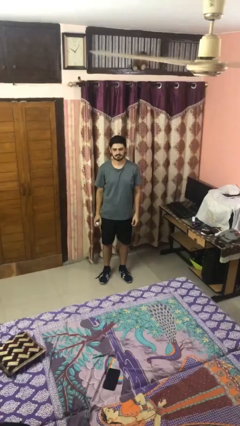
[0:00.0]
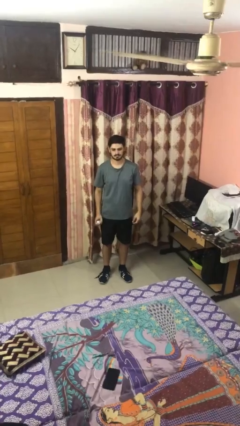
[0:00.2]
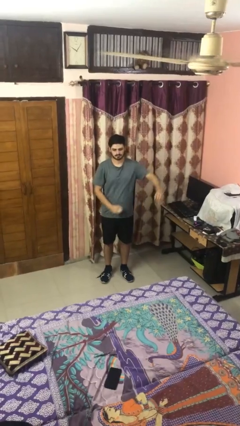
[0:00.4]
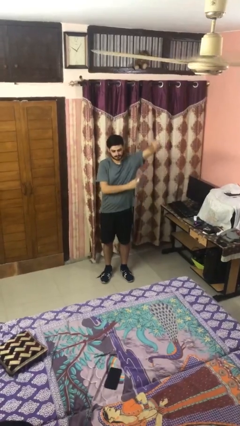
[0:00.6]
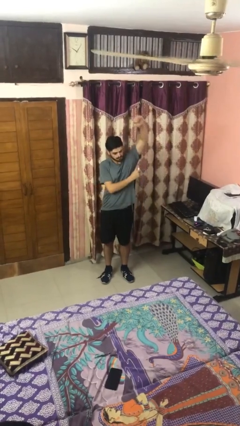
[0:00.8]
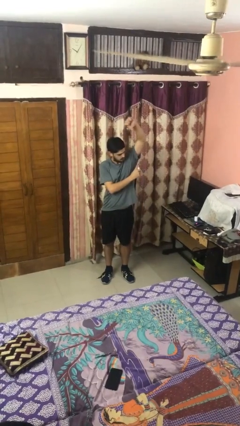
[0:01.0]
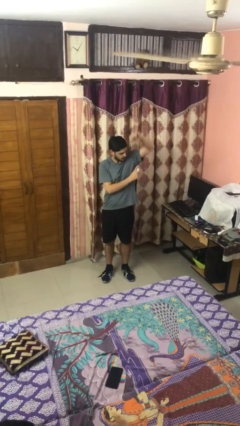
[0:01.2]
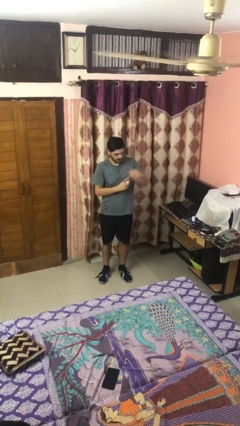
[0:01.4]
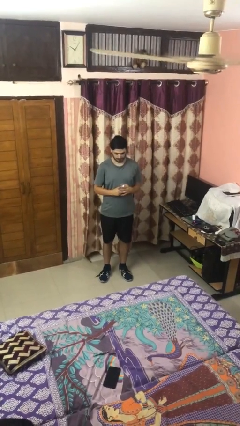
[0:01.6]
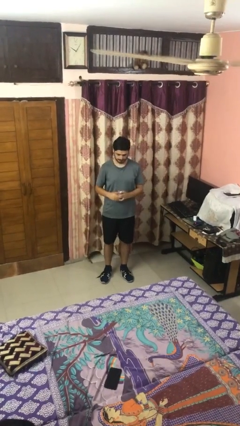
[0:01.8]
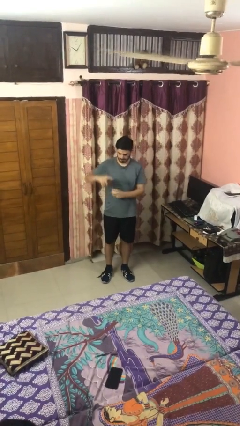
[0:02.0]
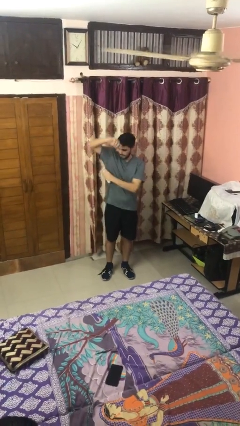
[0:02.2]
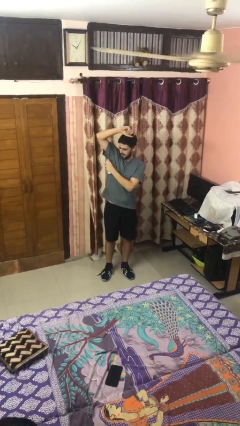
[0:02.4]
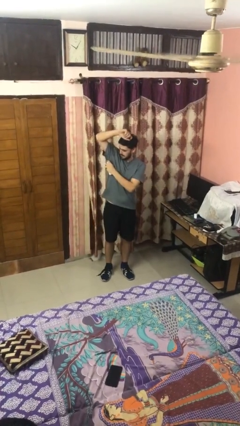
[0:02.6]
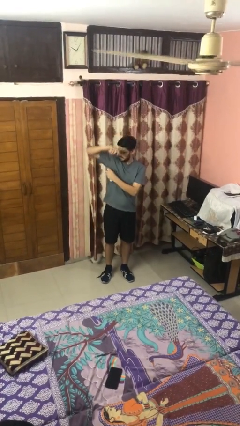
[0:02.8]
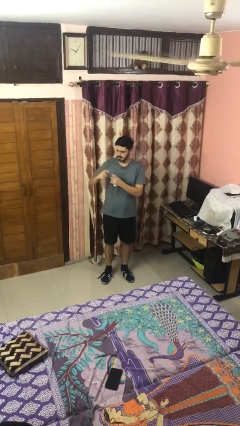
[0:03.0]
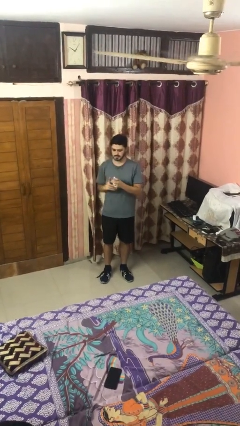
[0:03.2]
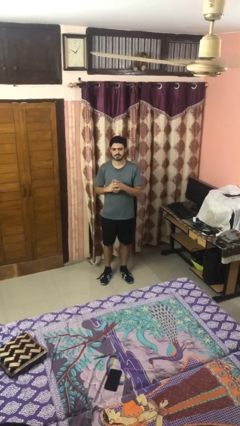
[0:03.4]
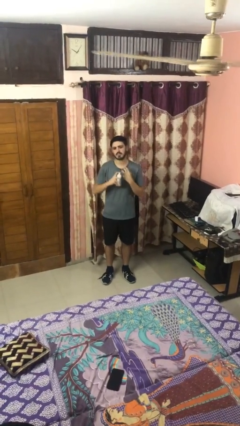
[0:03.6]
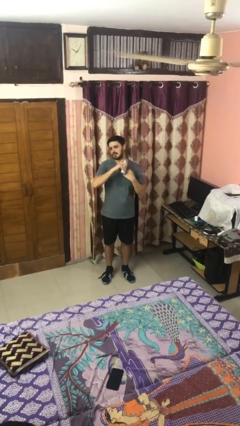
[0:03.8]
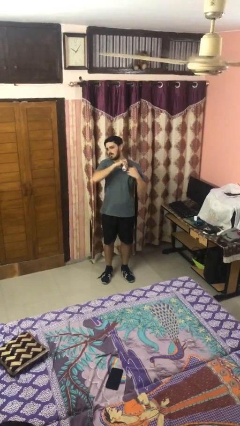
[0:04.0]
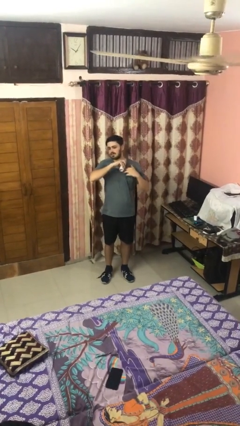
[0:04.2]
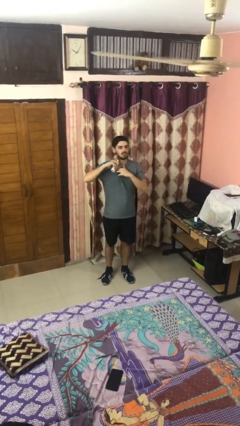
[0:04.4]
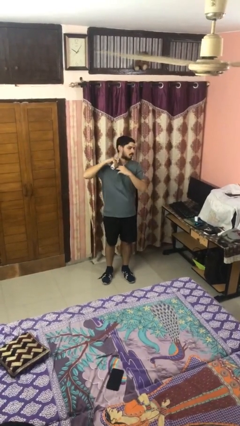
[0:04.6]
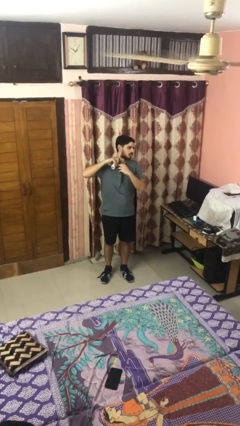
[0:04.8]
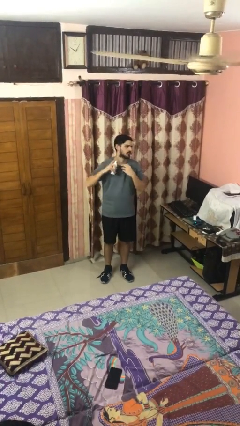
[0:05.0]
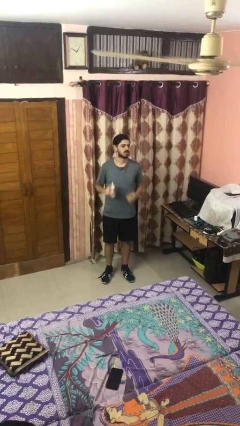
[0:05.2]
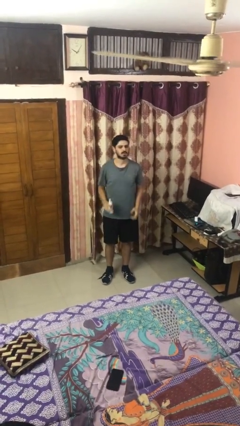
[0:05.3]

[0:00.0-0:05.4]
person applies deodorant

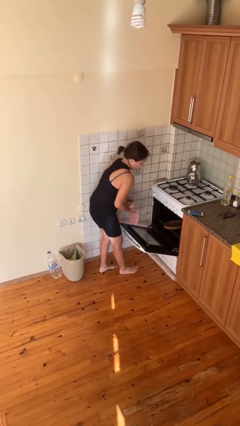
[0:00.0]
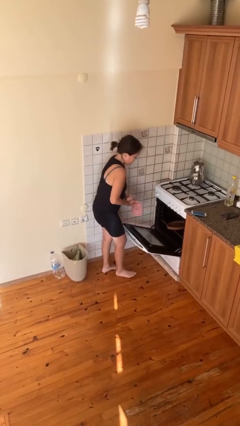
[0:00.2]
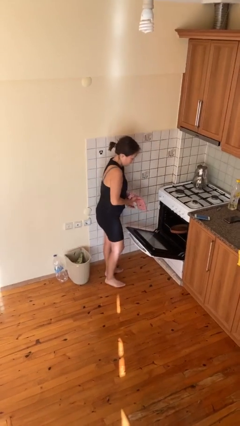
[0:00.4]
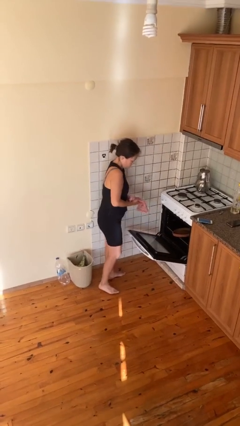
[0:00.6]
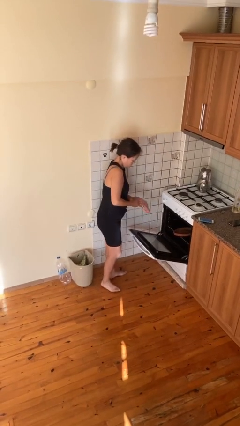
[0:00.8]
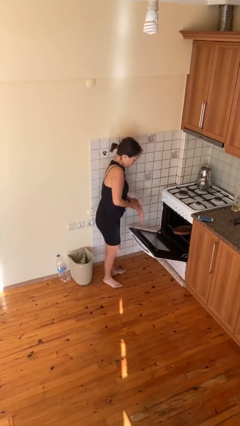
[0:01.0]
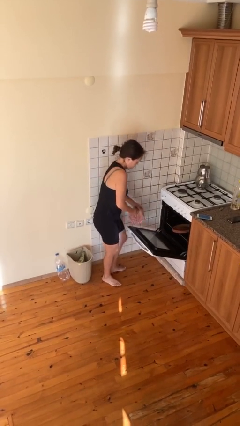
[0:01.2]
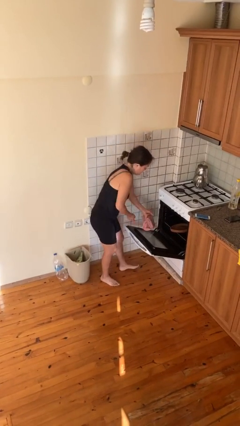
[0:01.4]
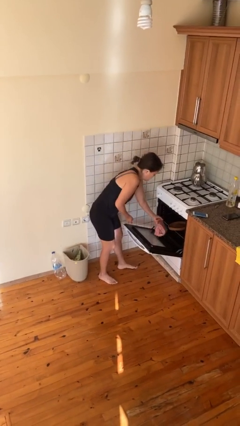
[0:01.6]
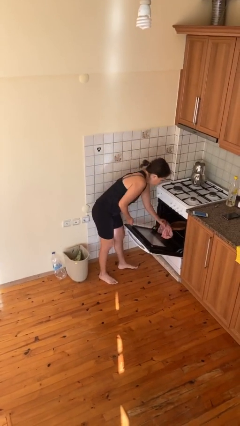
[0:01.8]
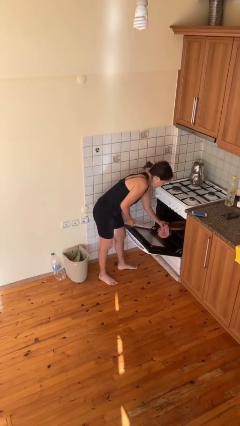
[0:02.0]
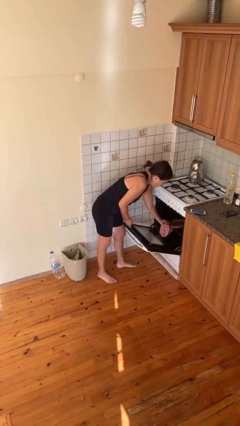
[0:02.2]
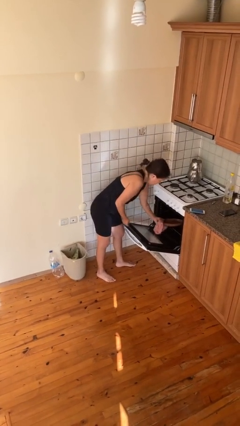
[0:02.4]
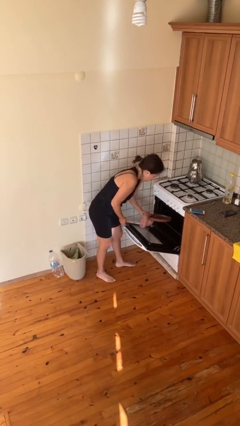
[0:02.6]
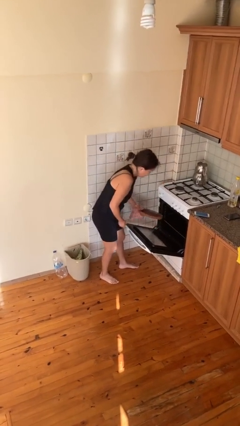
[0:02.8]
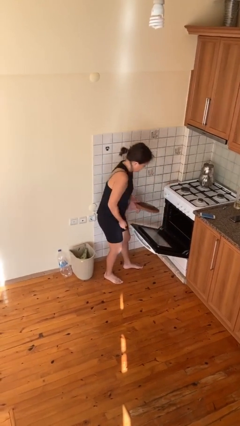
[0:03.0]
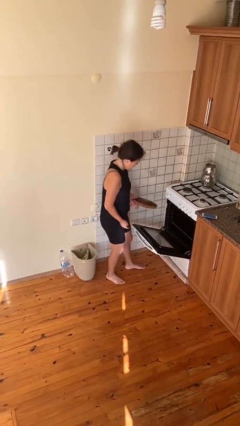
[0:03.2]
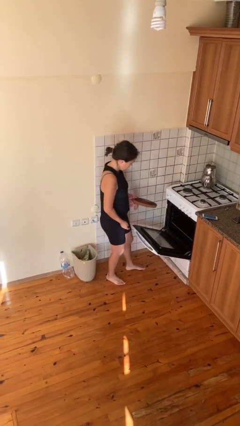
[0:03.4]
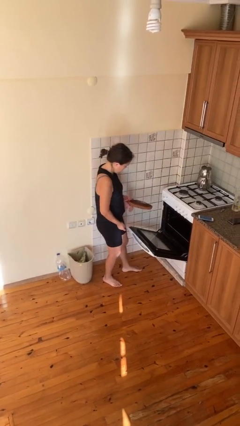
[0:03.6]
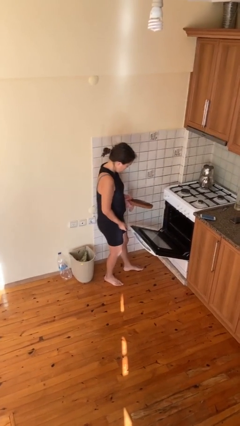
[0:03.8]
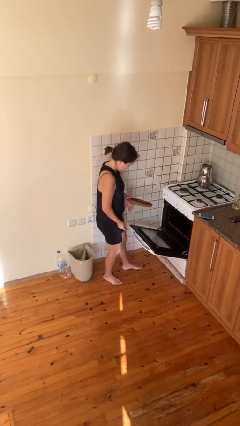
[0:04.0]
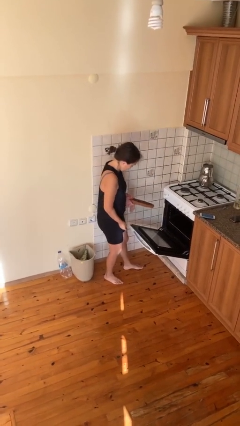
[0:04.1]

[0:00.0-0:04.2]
person takes object from oven

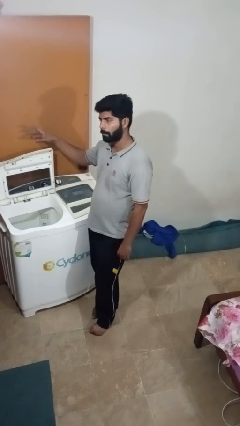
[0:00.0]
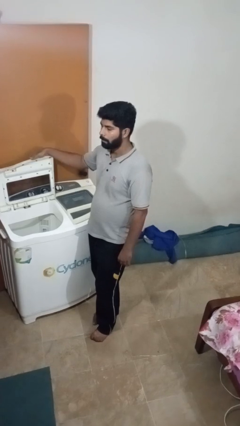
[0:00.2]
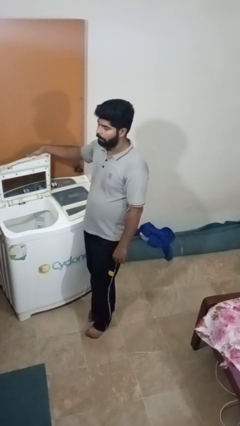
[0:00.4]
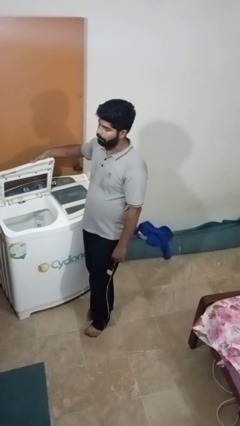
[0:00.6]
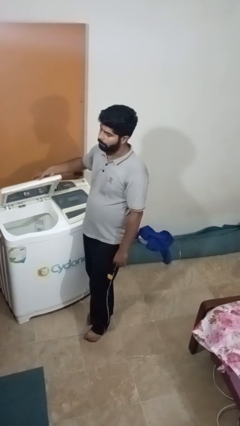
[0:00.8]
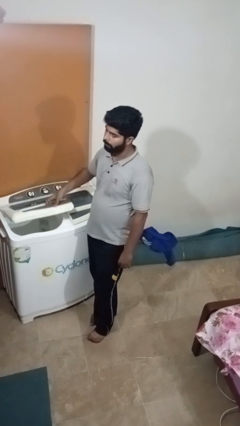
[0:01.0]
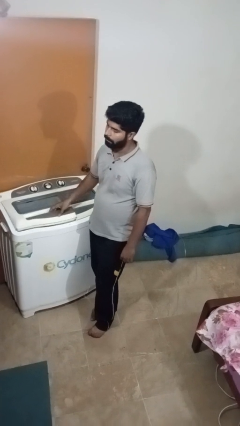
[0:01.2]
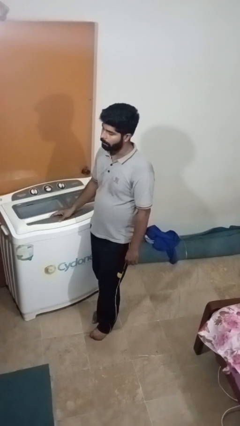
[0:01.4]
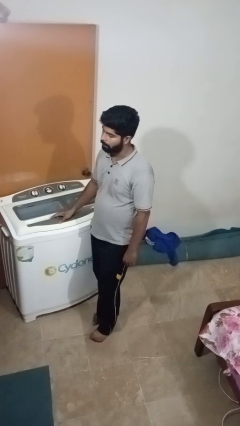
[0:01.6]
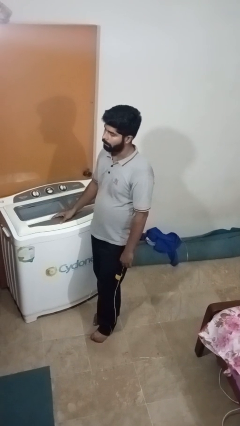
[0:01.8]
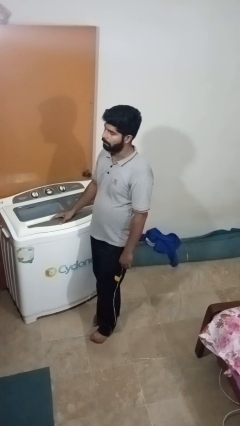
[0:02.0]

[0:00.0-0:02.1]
person closes clothes washer

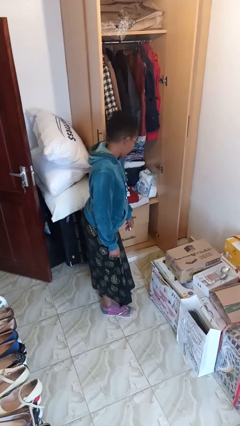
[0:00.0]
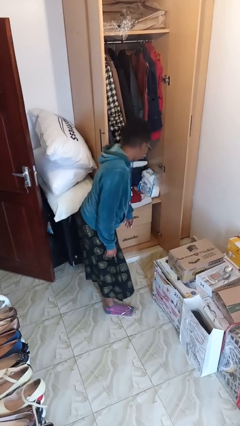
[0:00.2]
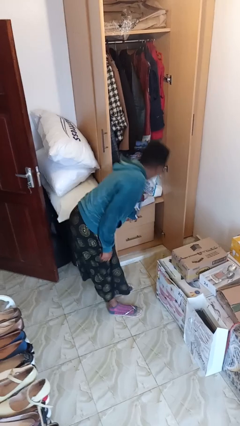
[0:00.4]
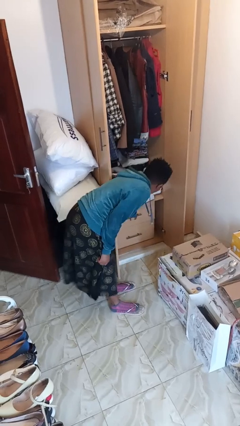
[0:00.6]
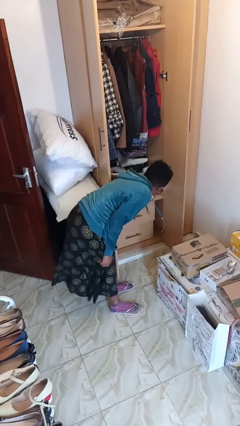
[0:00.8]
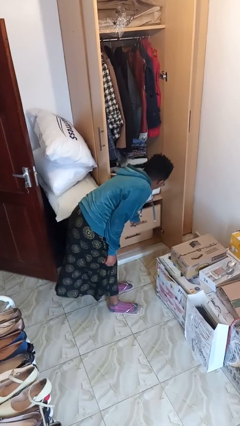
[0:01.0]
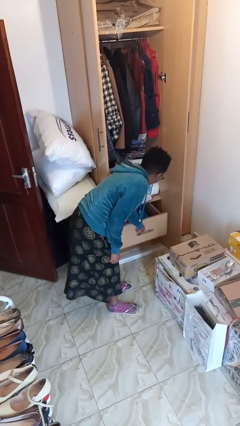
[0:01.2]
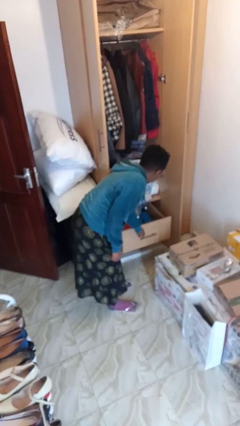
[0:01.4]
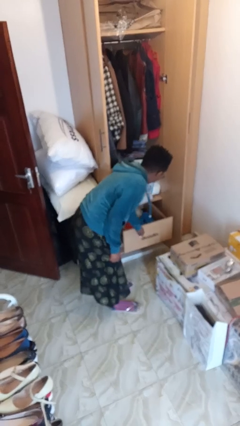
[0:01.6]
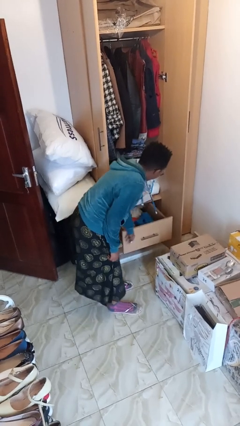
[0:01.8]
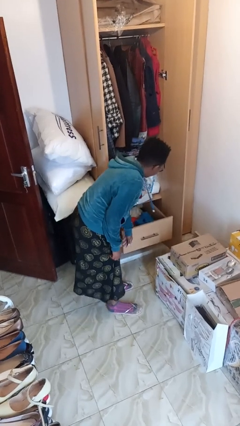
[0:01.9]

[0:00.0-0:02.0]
person opens dresser drawer

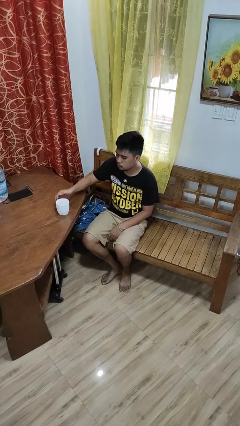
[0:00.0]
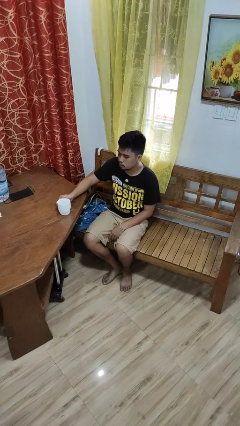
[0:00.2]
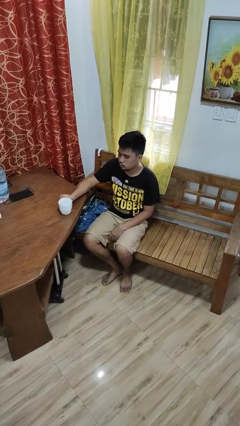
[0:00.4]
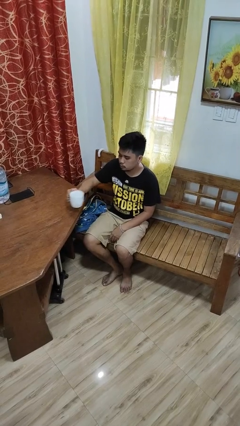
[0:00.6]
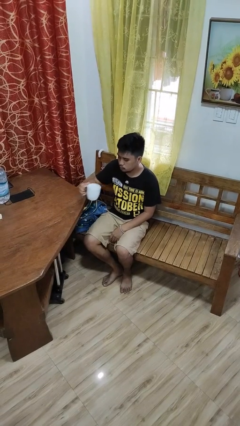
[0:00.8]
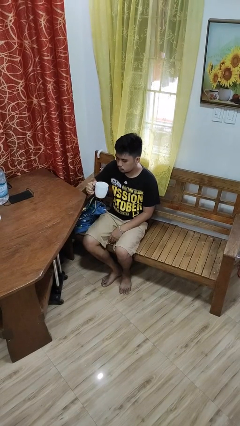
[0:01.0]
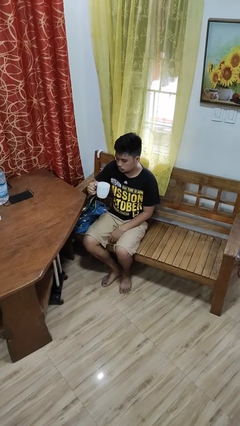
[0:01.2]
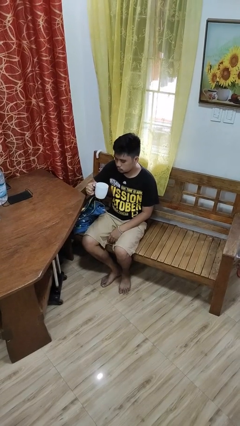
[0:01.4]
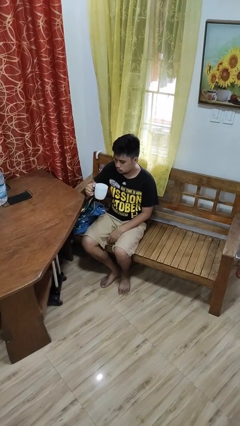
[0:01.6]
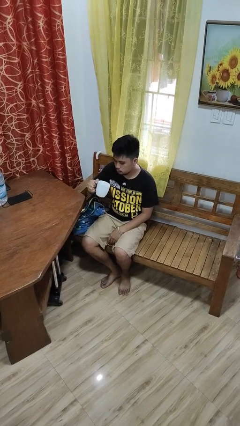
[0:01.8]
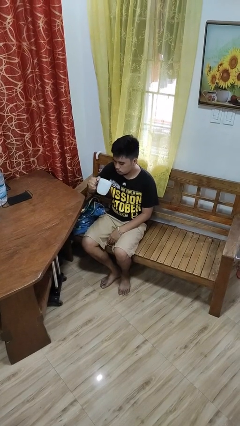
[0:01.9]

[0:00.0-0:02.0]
person picks up object from table

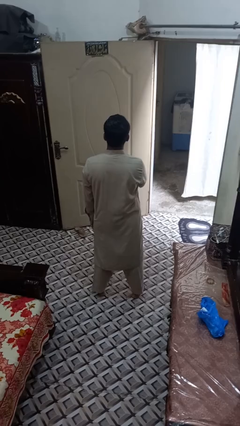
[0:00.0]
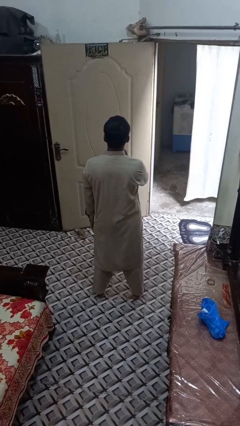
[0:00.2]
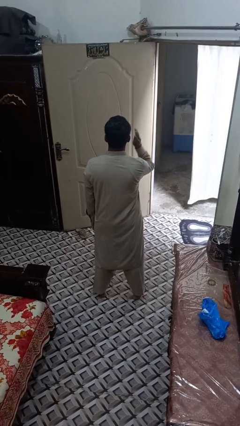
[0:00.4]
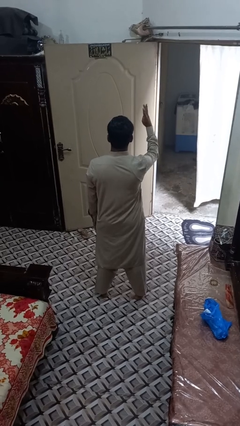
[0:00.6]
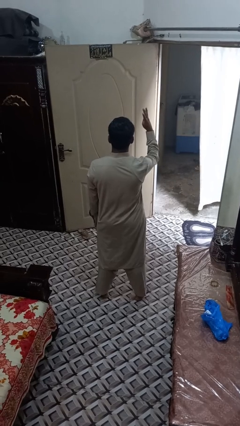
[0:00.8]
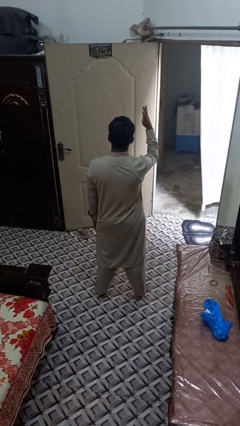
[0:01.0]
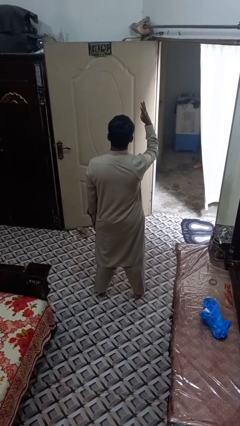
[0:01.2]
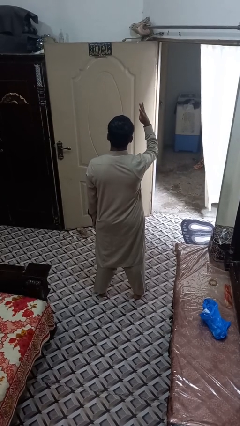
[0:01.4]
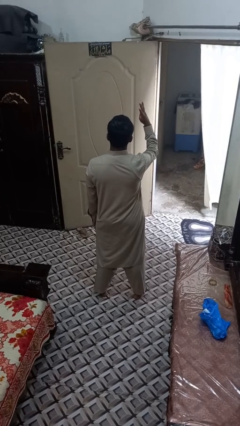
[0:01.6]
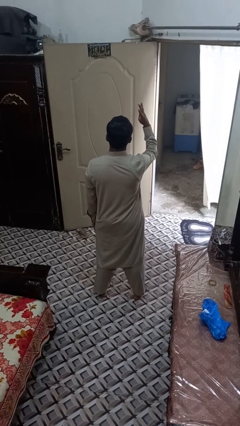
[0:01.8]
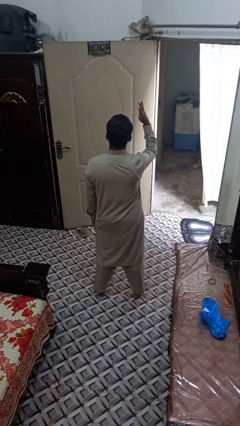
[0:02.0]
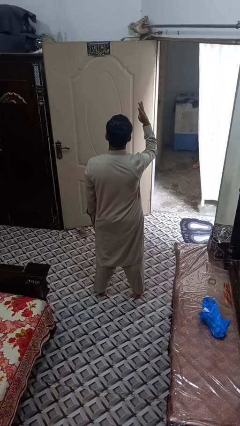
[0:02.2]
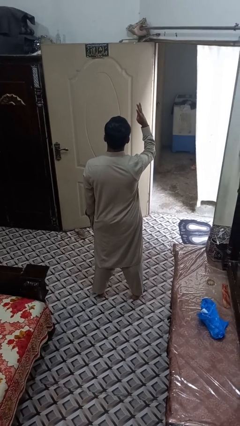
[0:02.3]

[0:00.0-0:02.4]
person gestures number four
